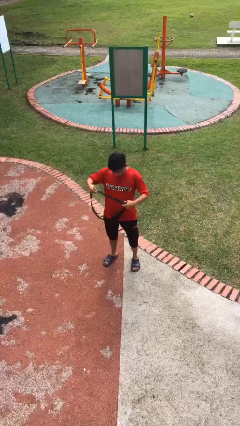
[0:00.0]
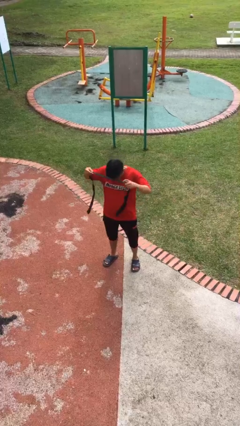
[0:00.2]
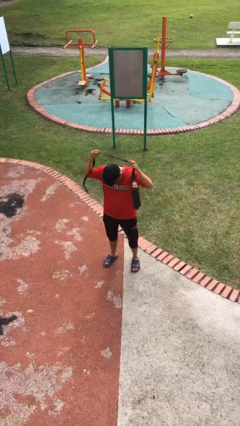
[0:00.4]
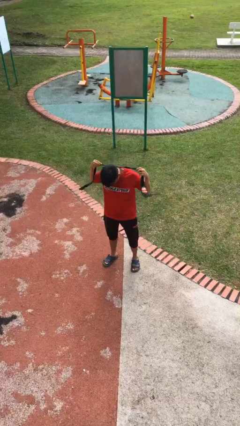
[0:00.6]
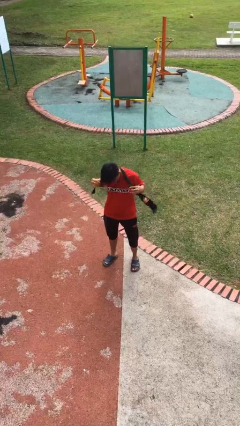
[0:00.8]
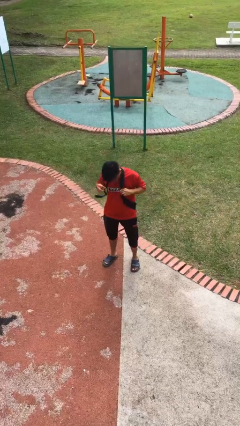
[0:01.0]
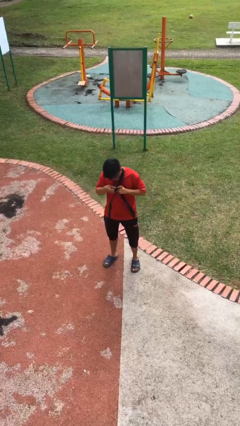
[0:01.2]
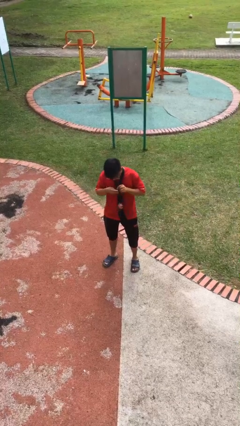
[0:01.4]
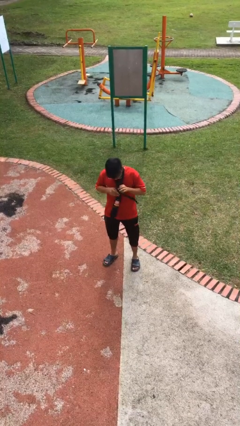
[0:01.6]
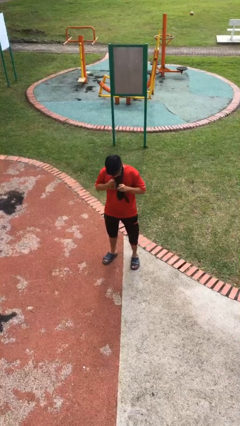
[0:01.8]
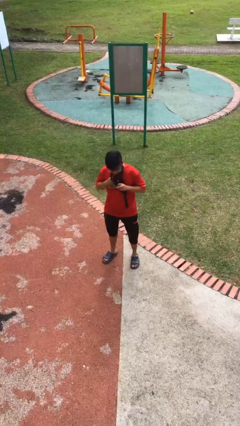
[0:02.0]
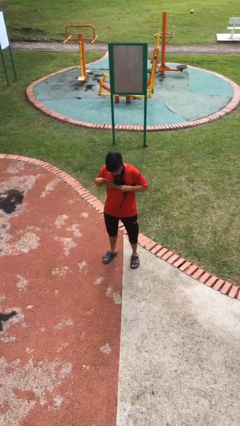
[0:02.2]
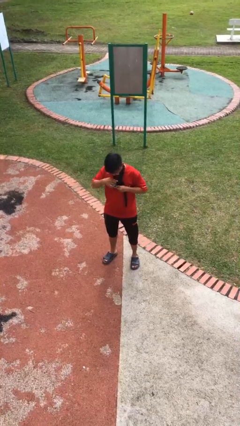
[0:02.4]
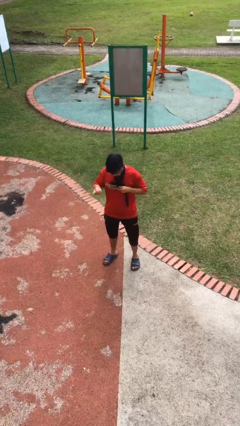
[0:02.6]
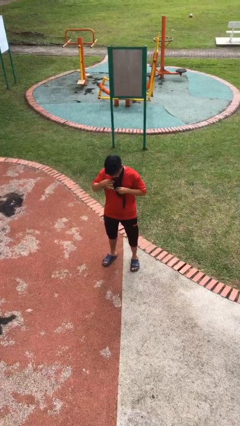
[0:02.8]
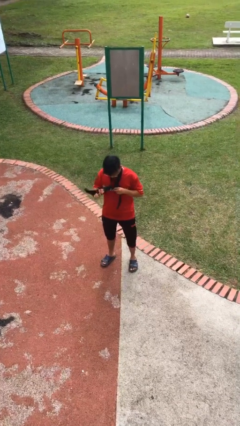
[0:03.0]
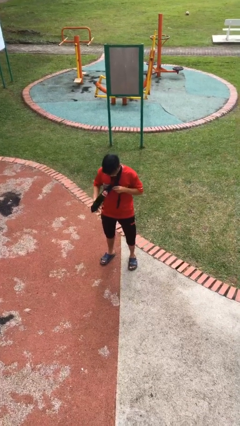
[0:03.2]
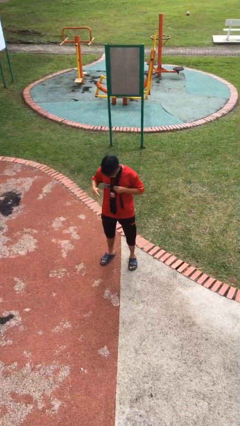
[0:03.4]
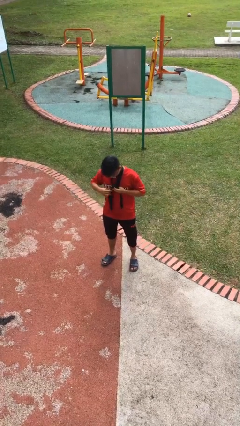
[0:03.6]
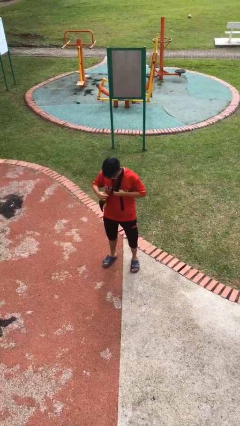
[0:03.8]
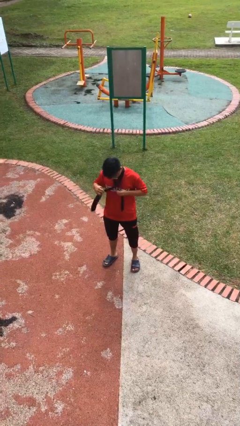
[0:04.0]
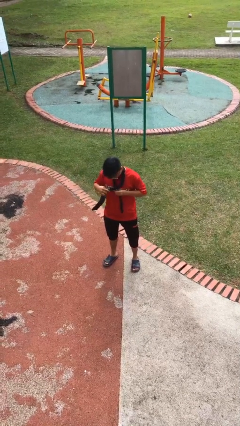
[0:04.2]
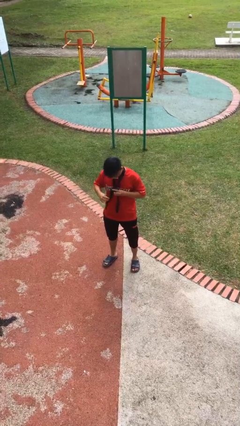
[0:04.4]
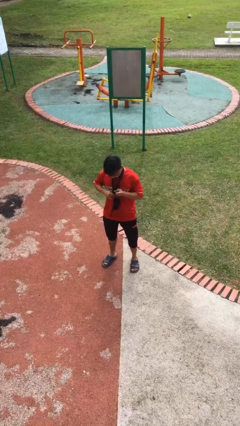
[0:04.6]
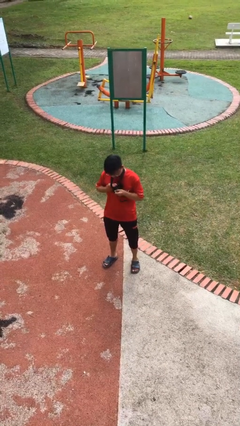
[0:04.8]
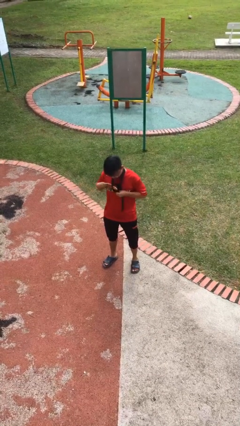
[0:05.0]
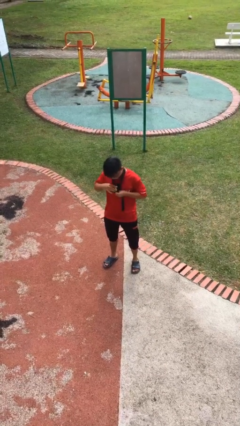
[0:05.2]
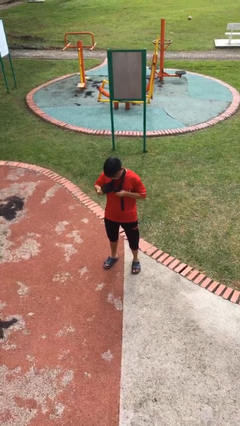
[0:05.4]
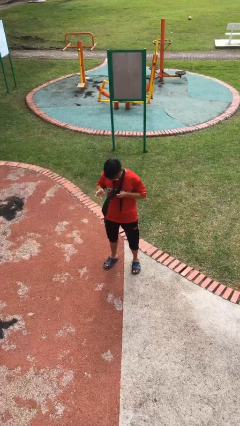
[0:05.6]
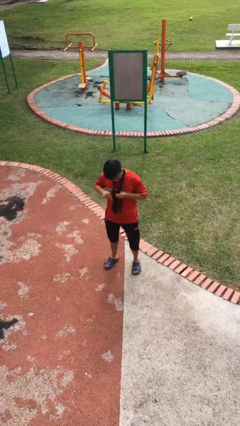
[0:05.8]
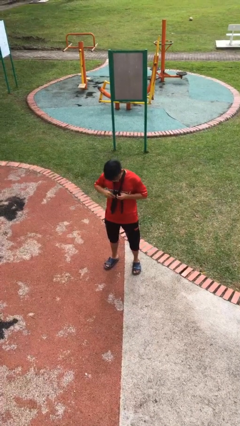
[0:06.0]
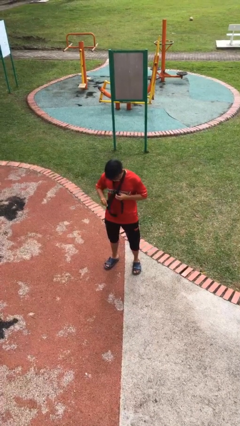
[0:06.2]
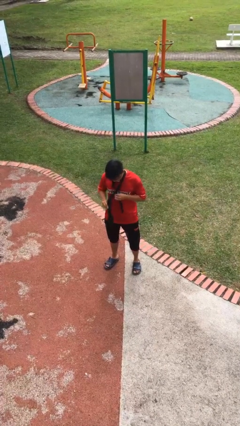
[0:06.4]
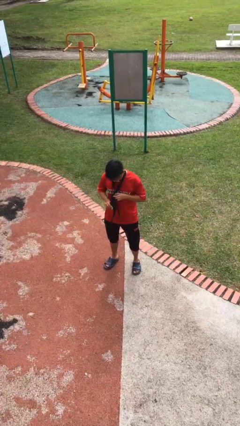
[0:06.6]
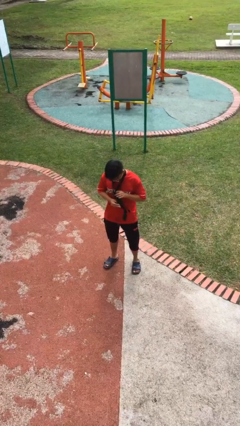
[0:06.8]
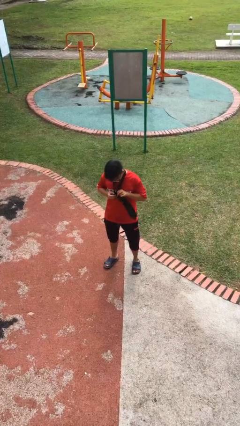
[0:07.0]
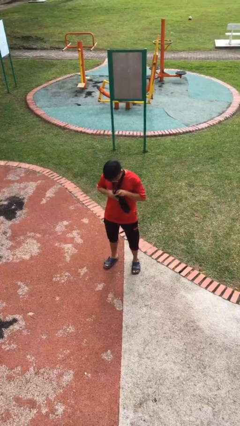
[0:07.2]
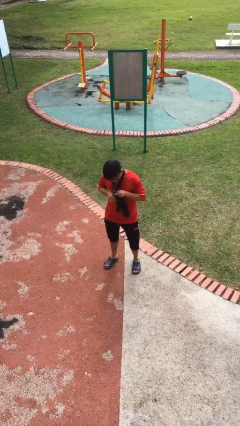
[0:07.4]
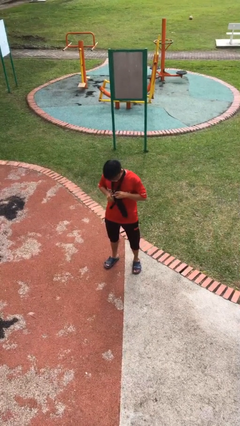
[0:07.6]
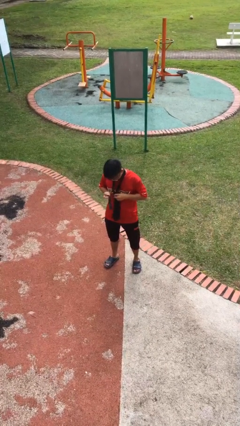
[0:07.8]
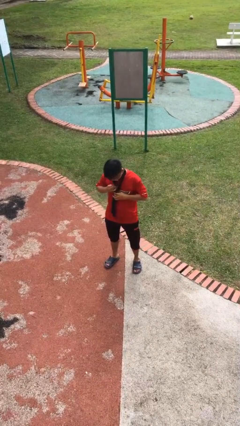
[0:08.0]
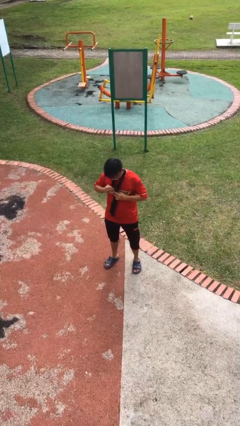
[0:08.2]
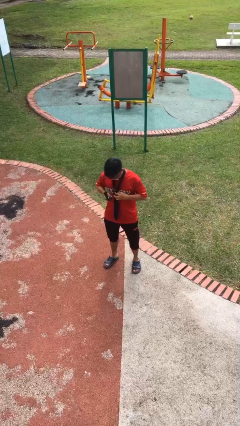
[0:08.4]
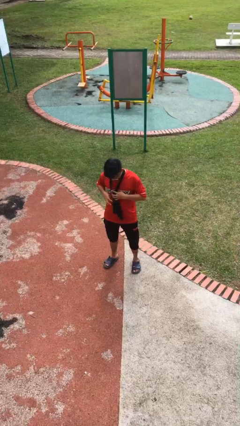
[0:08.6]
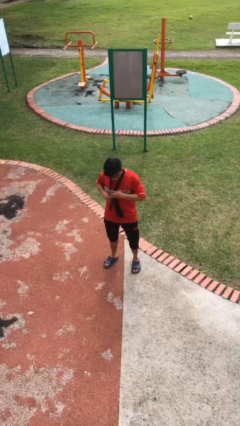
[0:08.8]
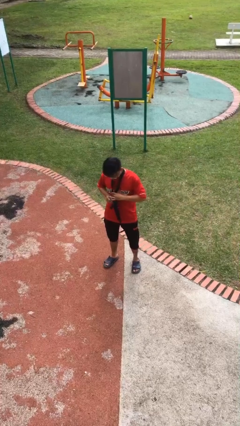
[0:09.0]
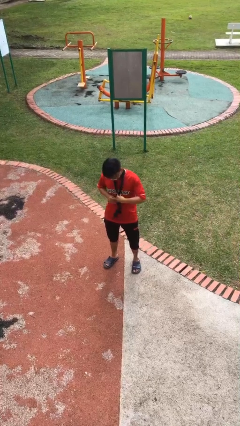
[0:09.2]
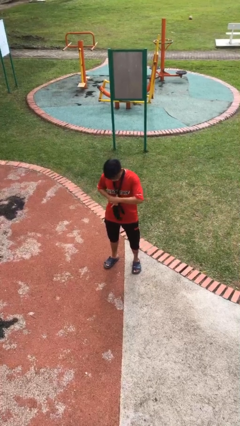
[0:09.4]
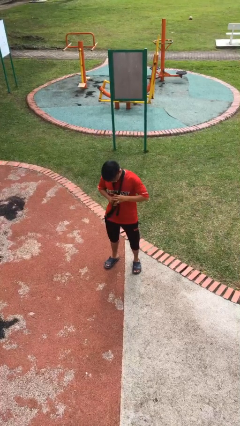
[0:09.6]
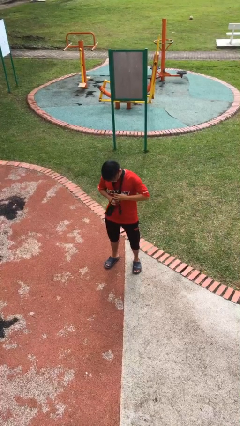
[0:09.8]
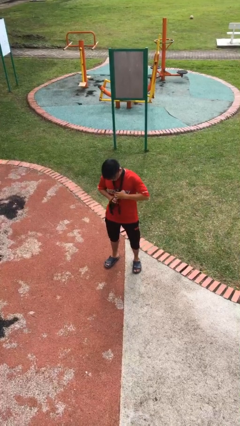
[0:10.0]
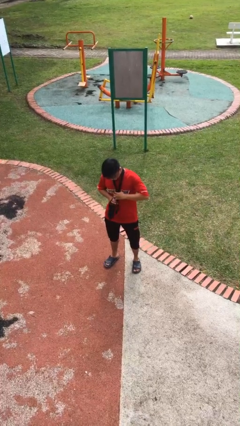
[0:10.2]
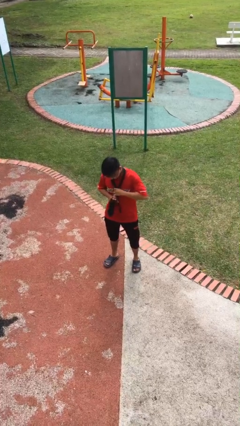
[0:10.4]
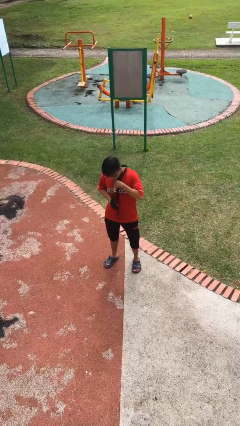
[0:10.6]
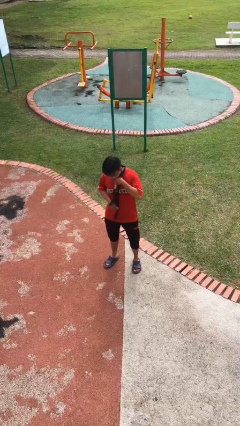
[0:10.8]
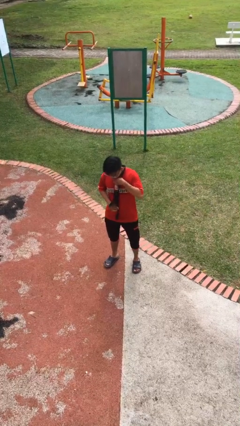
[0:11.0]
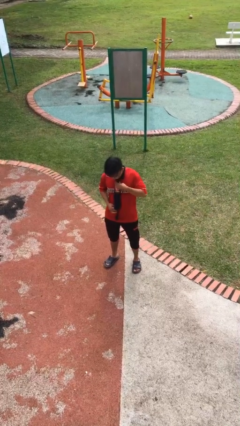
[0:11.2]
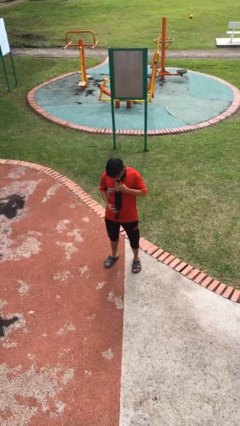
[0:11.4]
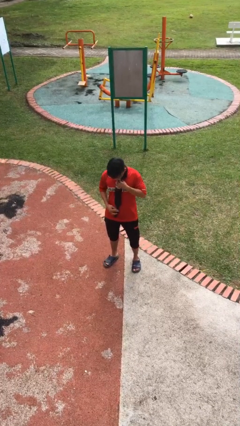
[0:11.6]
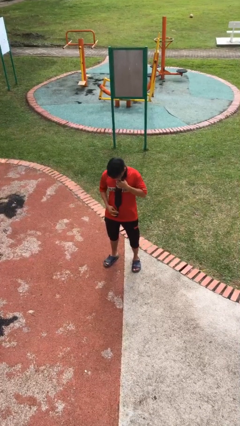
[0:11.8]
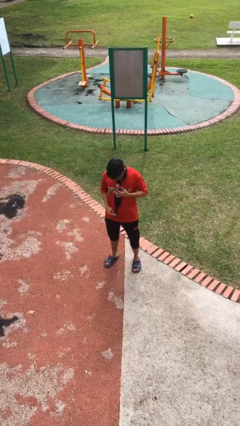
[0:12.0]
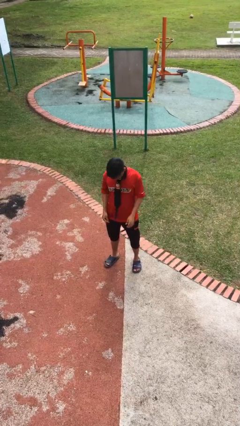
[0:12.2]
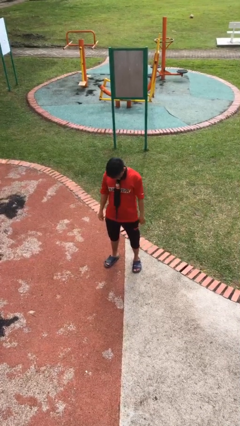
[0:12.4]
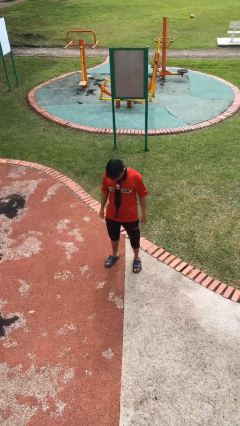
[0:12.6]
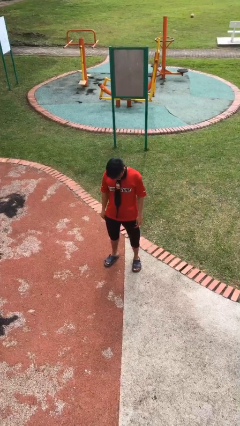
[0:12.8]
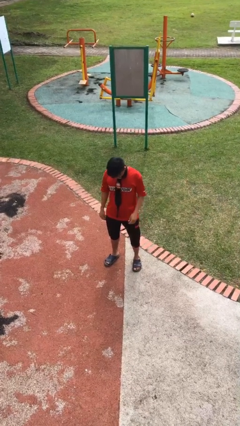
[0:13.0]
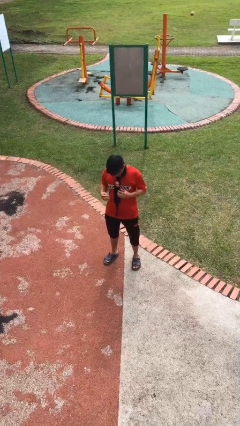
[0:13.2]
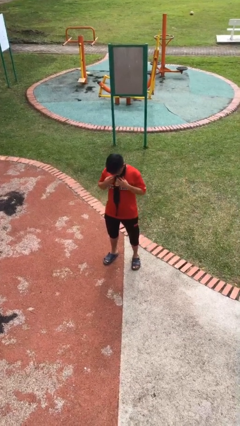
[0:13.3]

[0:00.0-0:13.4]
person puts on necktie

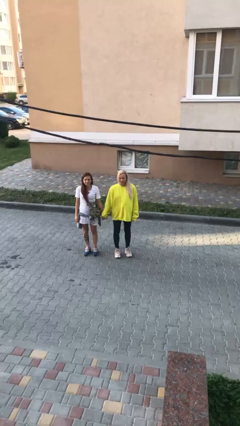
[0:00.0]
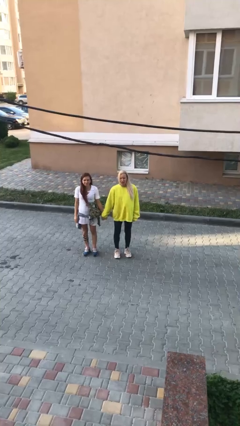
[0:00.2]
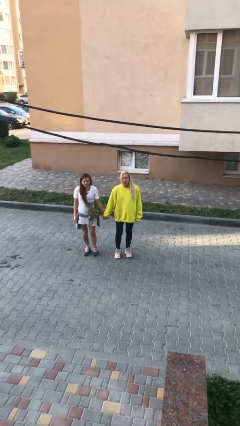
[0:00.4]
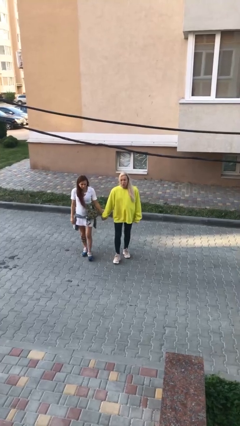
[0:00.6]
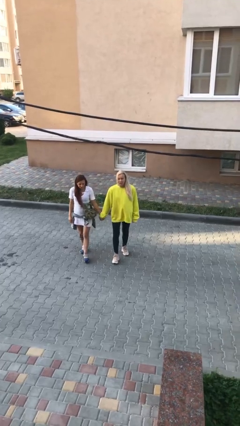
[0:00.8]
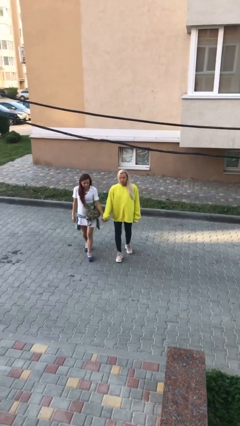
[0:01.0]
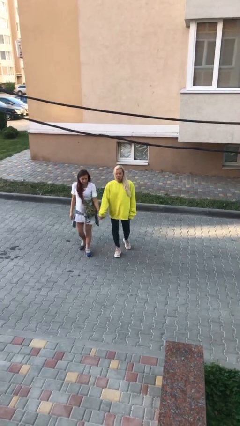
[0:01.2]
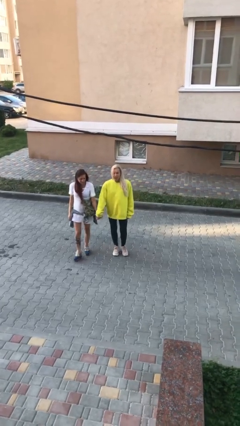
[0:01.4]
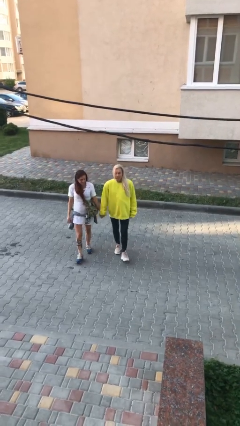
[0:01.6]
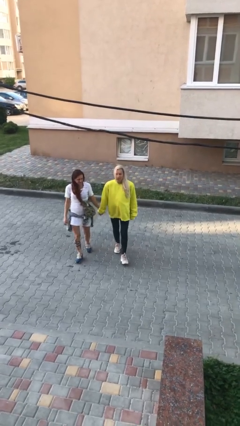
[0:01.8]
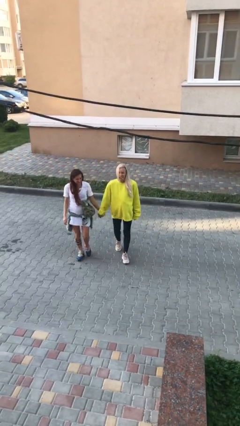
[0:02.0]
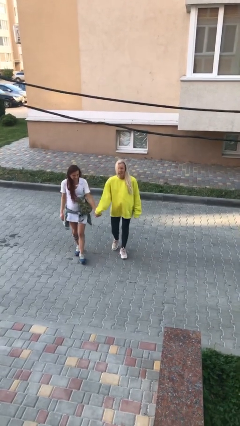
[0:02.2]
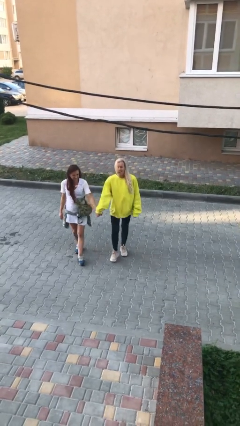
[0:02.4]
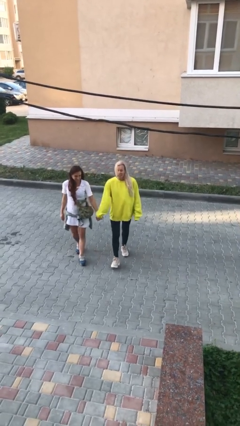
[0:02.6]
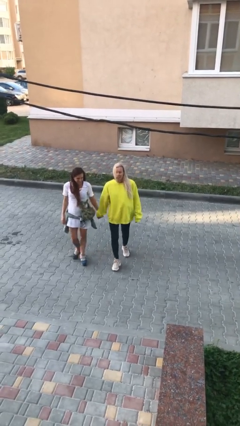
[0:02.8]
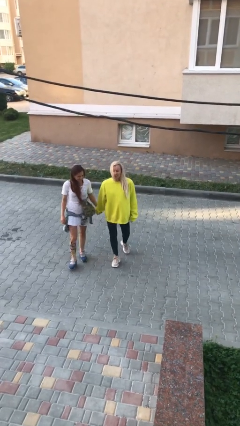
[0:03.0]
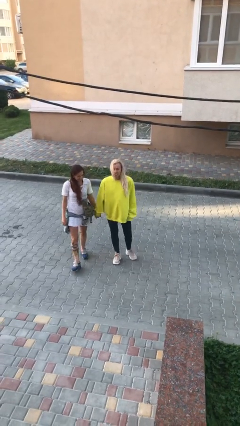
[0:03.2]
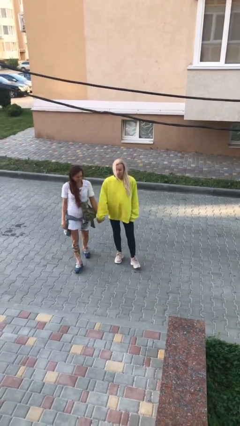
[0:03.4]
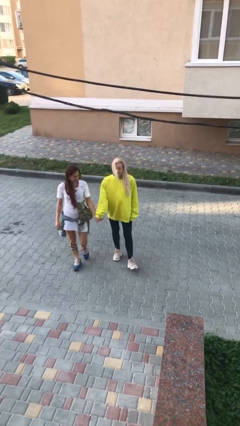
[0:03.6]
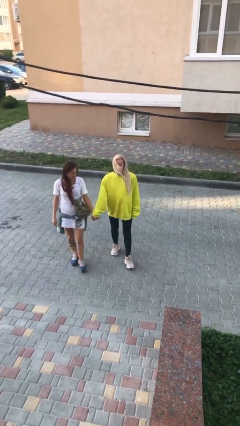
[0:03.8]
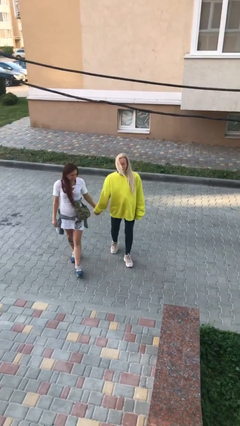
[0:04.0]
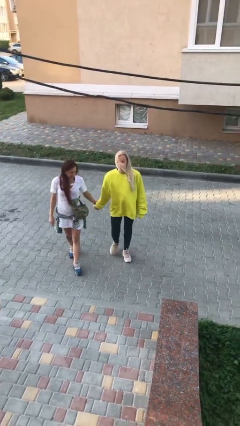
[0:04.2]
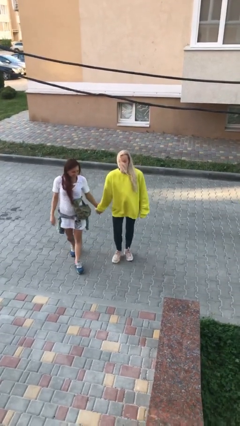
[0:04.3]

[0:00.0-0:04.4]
person holds hand

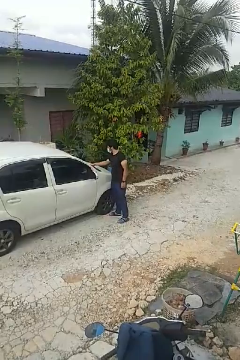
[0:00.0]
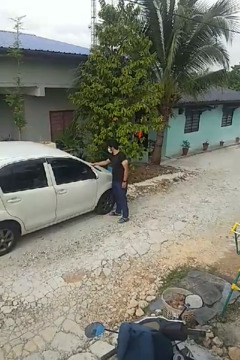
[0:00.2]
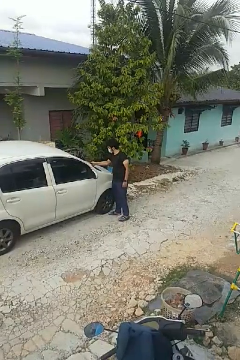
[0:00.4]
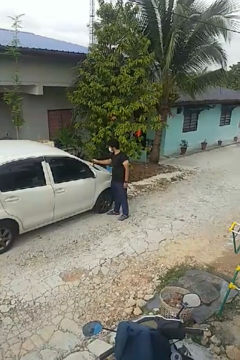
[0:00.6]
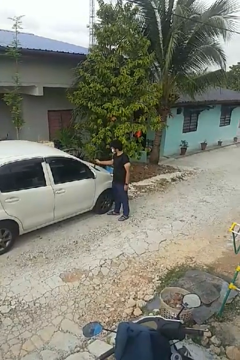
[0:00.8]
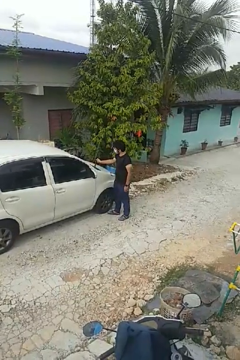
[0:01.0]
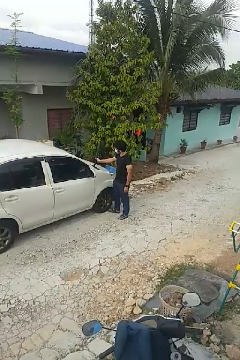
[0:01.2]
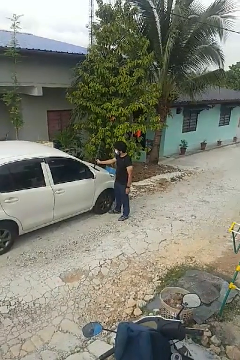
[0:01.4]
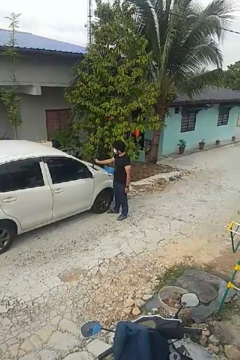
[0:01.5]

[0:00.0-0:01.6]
person flips up car wipers
